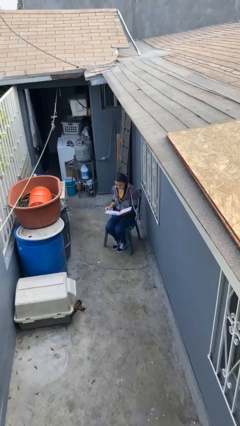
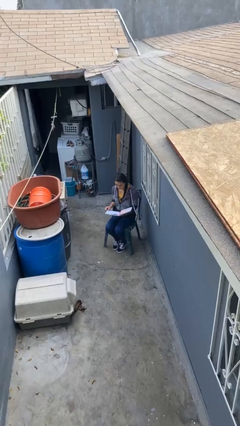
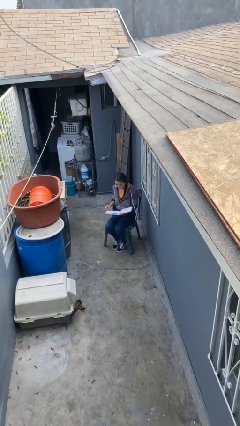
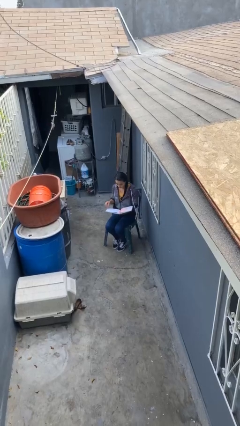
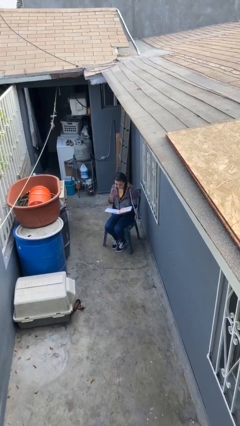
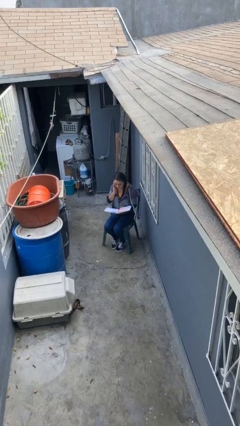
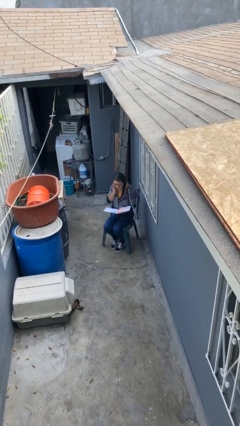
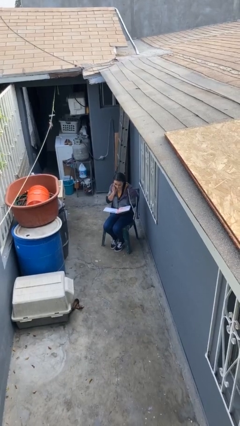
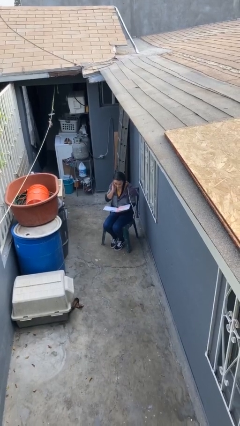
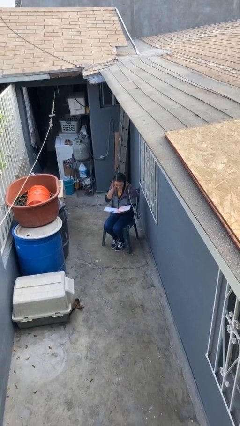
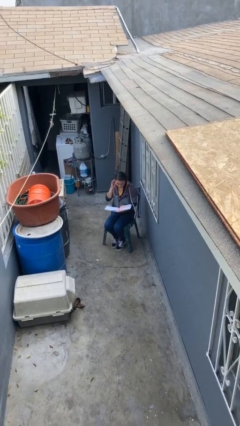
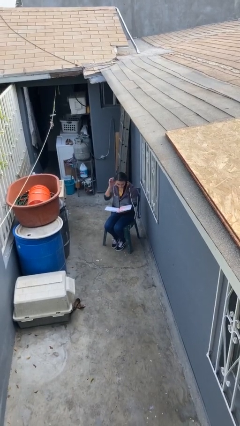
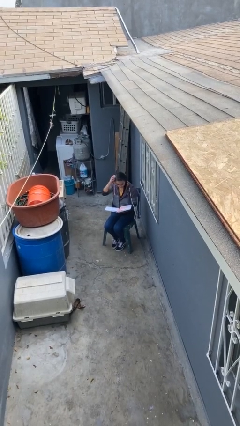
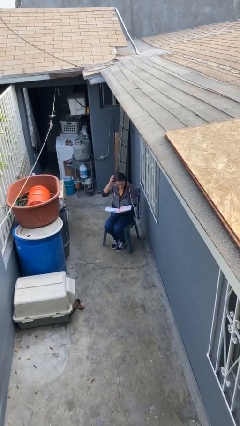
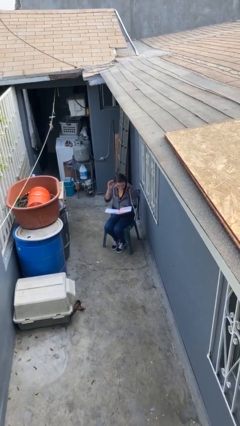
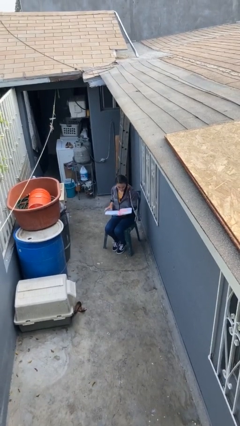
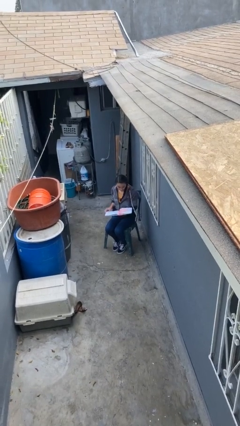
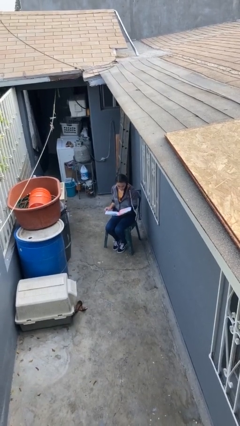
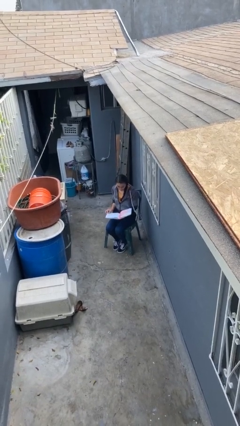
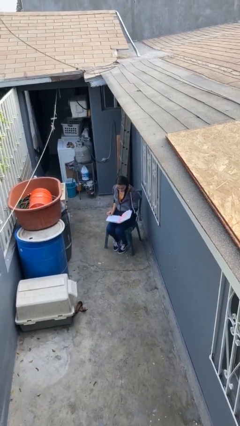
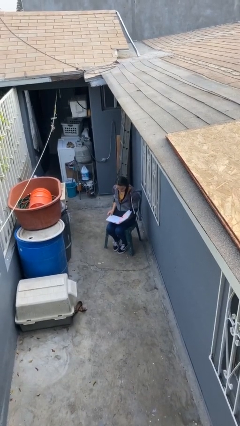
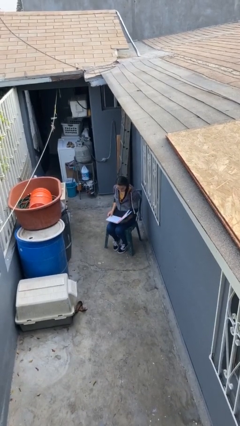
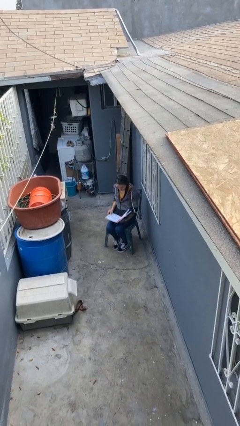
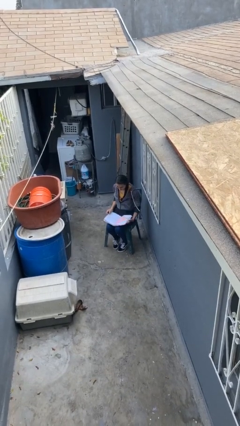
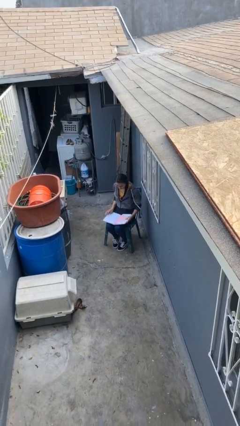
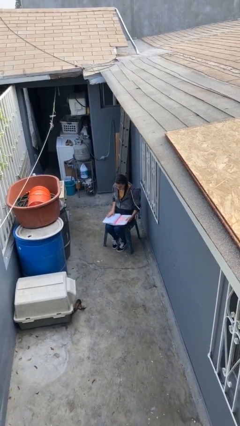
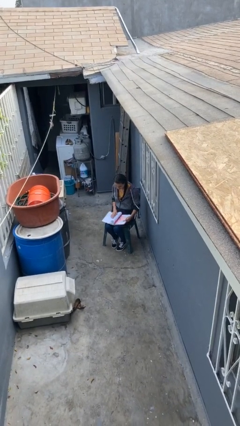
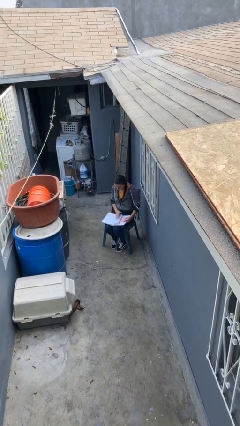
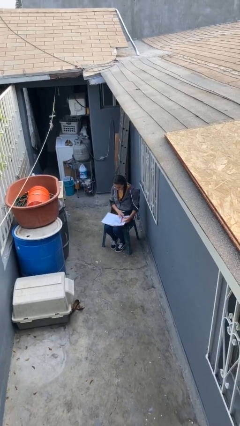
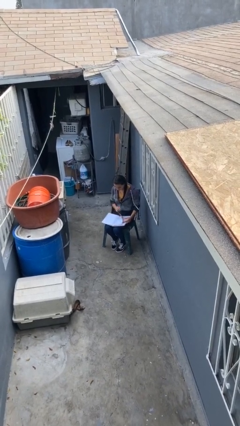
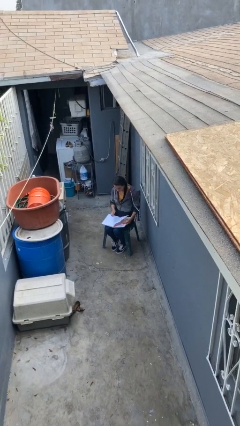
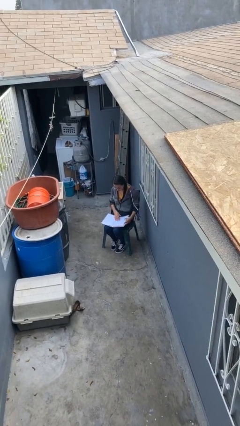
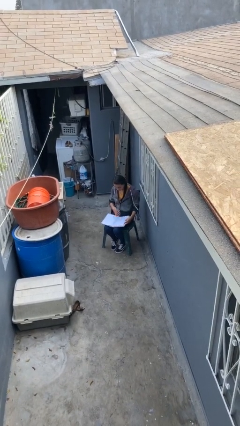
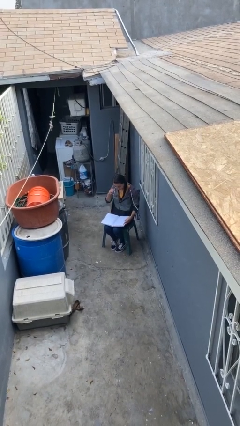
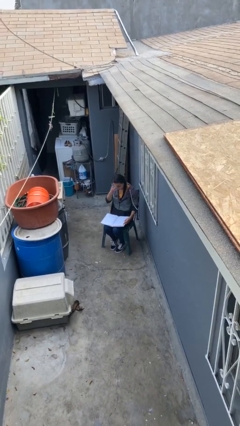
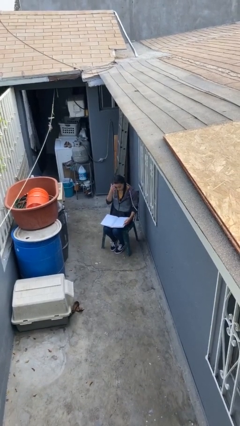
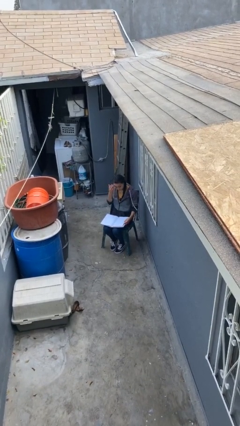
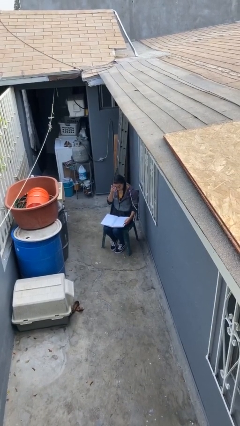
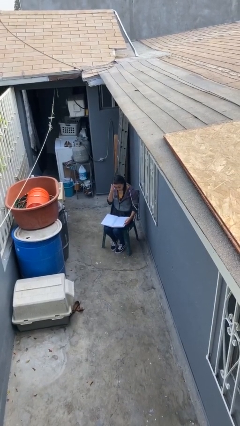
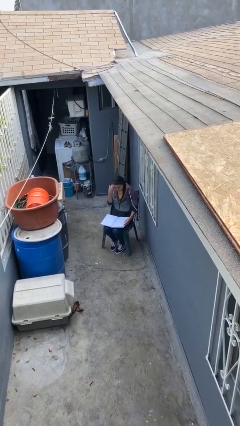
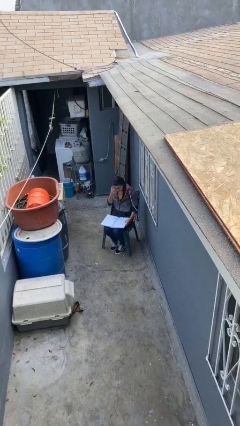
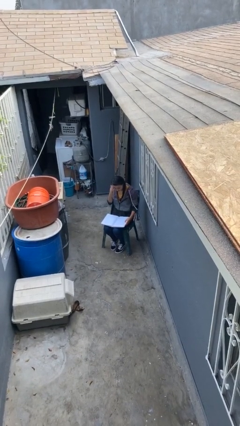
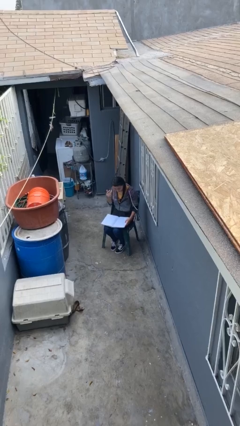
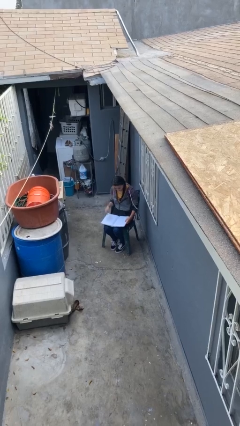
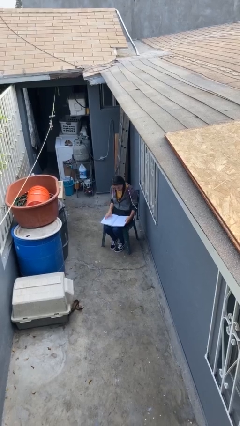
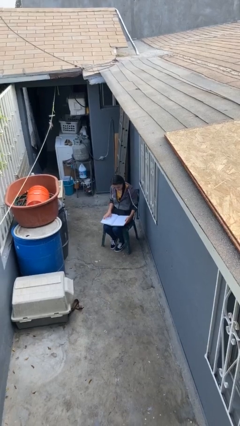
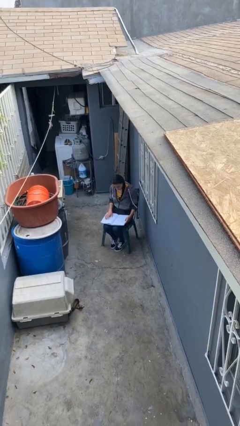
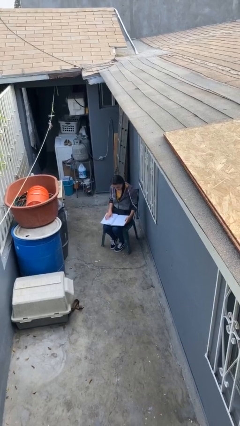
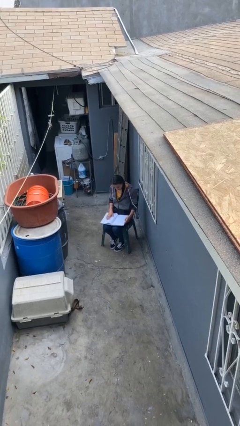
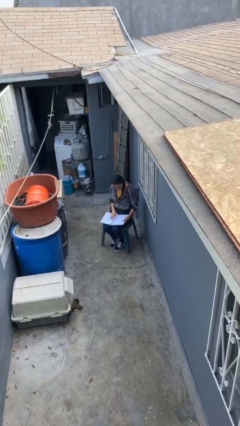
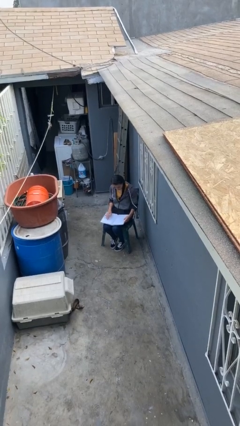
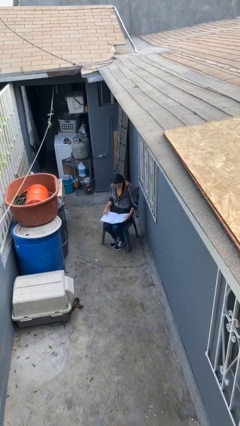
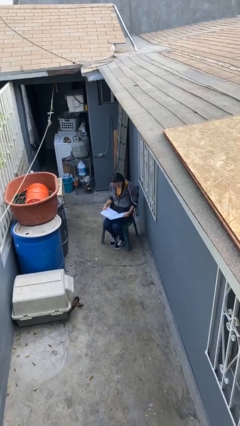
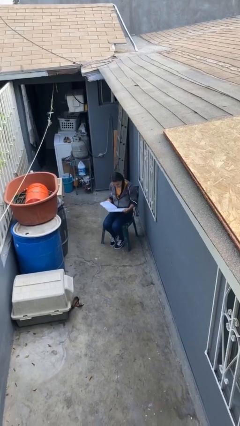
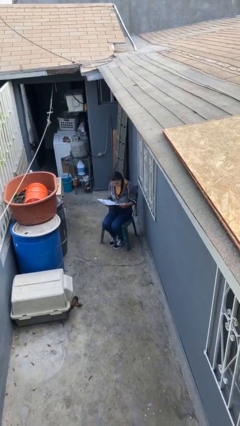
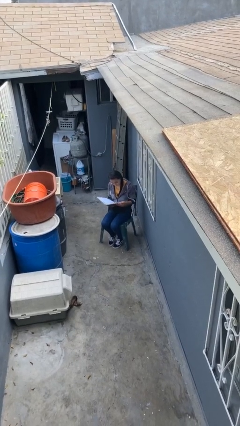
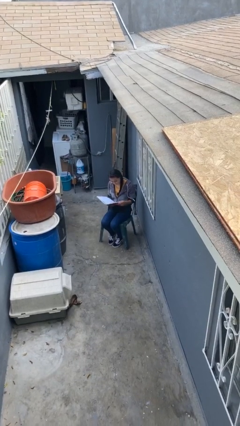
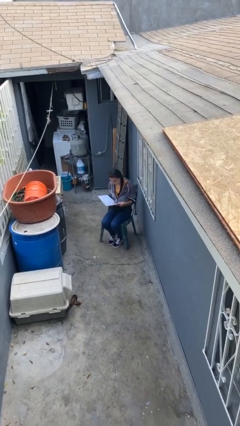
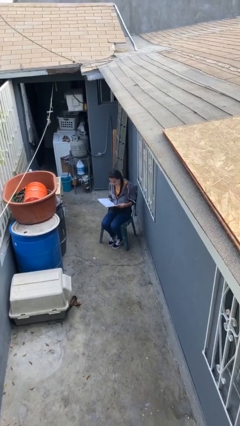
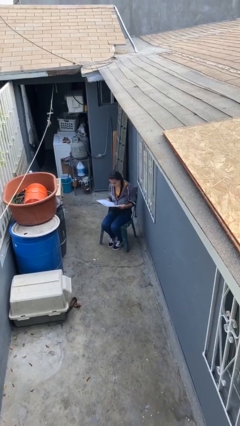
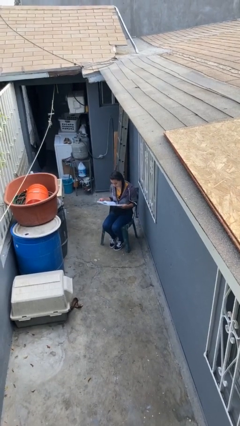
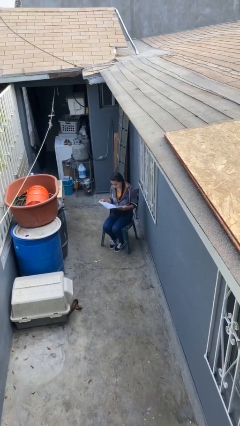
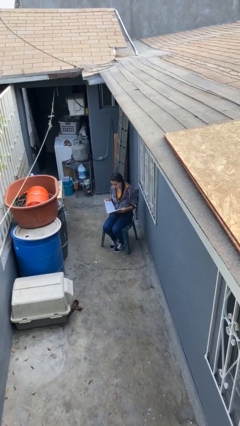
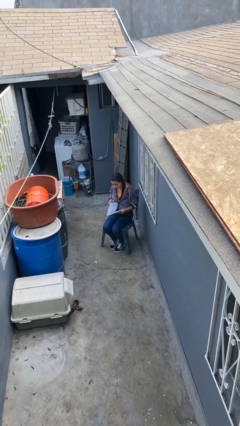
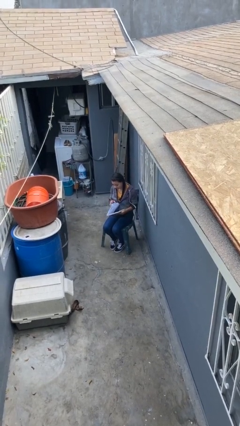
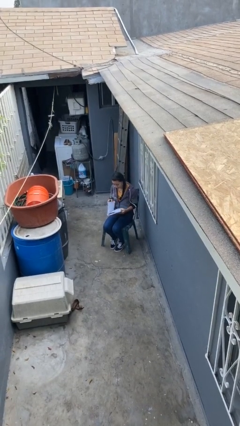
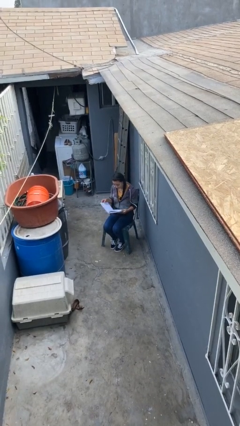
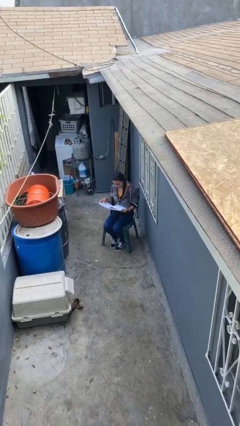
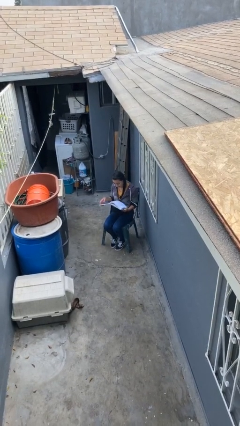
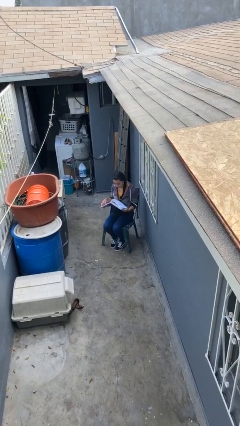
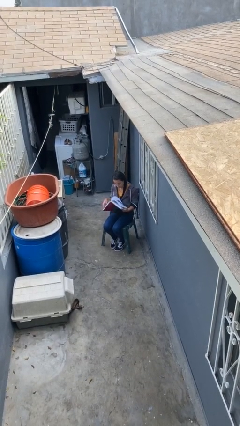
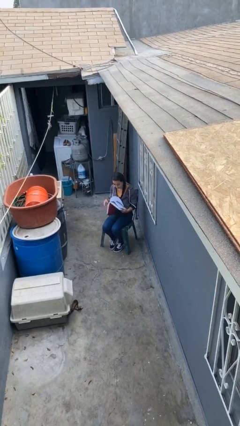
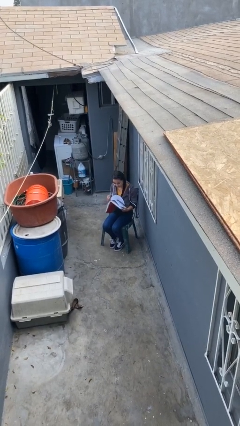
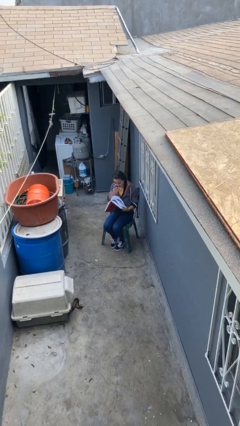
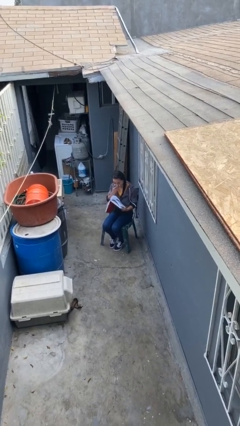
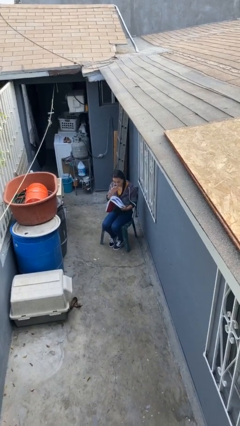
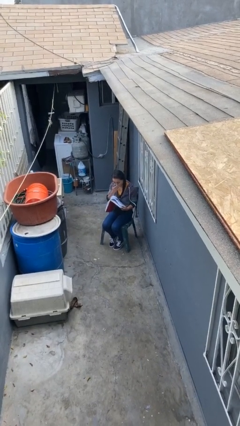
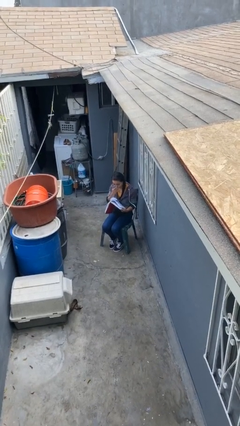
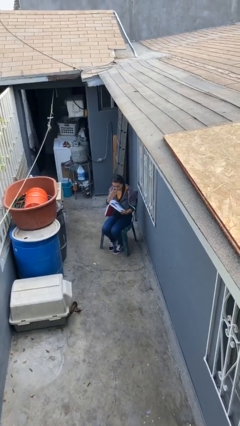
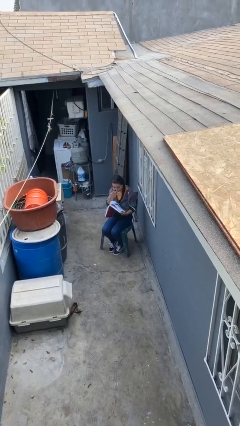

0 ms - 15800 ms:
person reads document

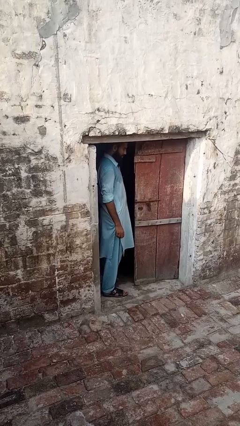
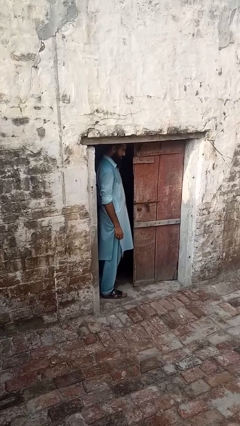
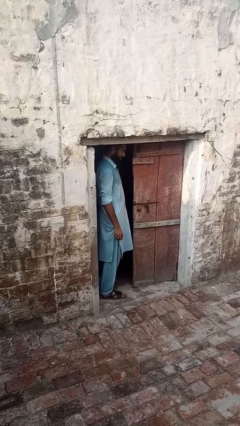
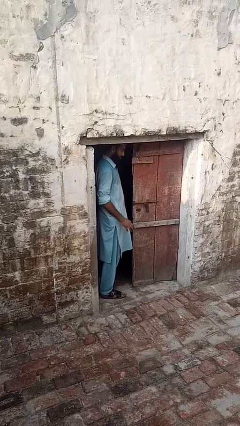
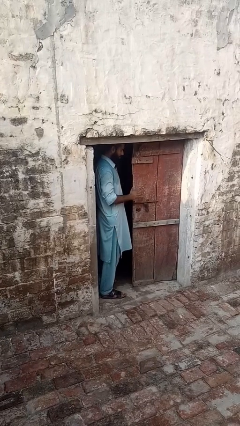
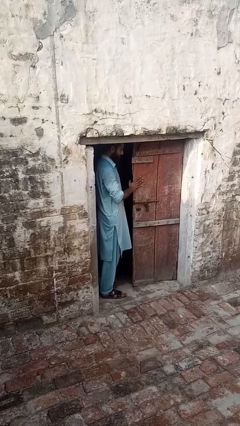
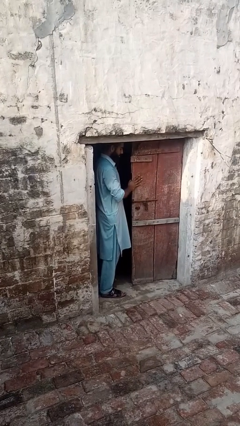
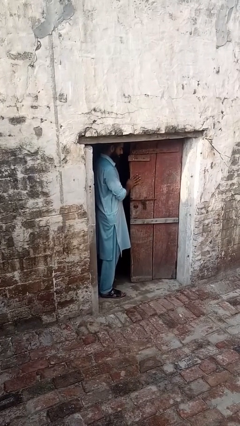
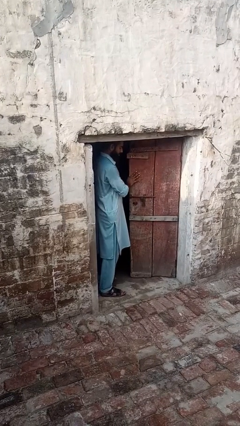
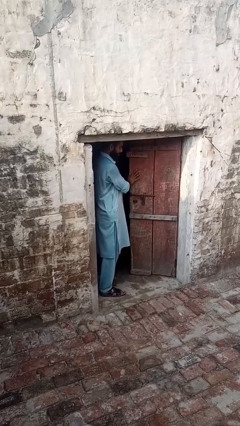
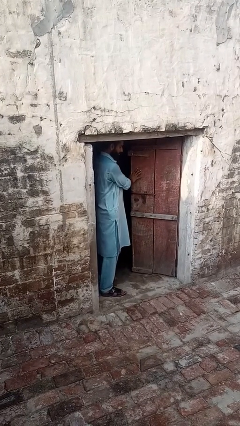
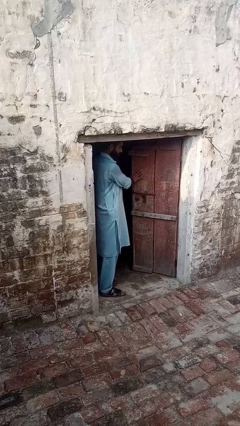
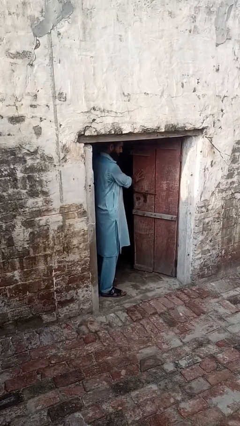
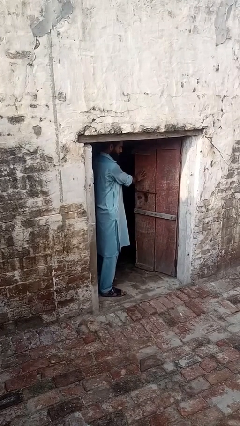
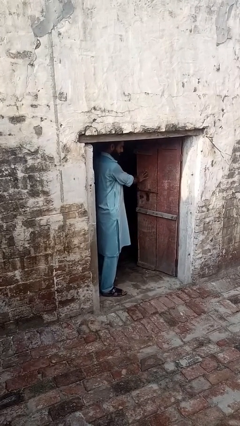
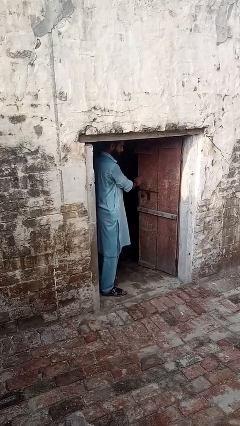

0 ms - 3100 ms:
person opens facility door
